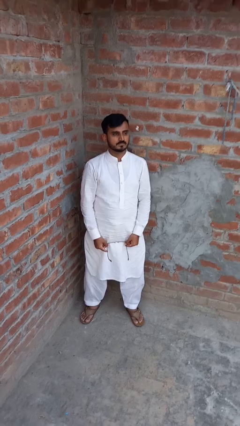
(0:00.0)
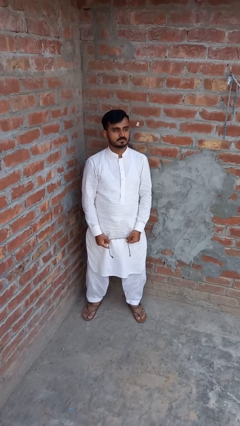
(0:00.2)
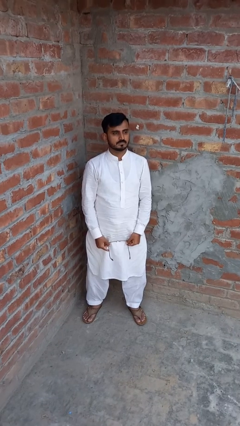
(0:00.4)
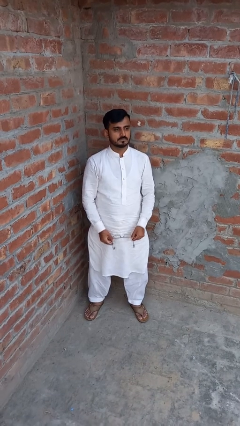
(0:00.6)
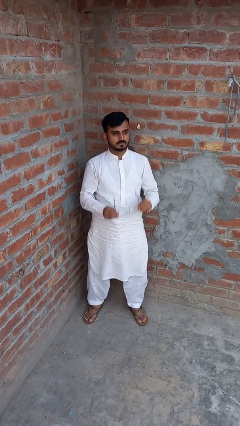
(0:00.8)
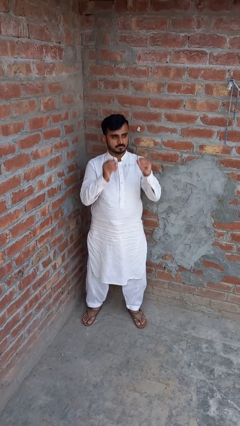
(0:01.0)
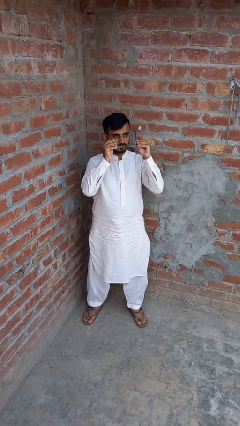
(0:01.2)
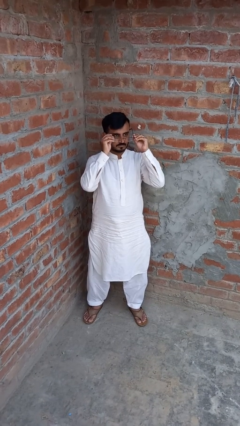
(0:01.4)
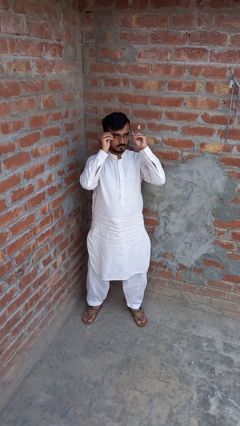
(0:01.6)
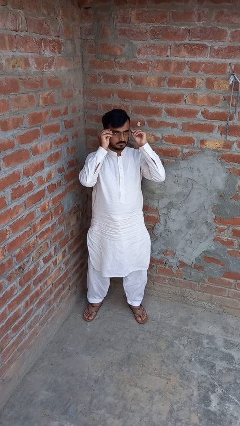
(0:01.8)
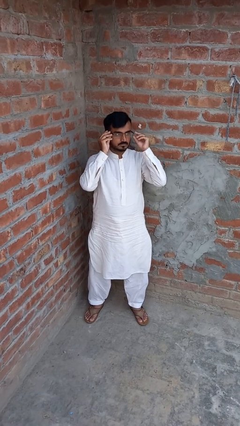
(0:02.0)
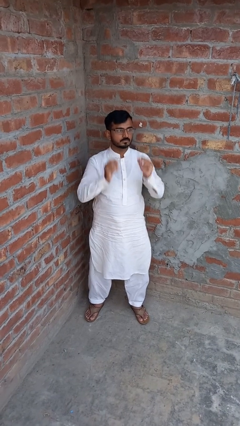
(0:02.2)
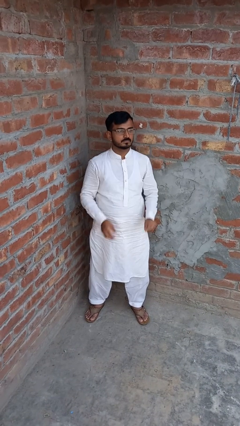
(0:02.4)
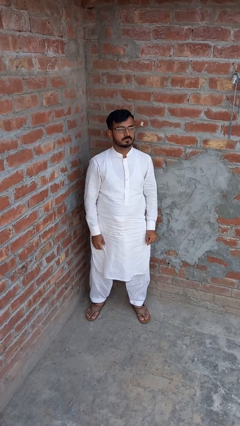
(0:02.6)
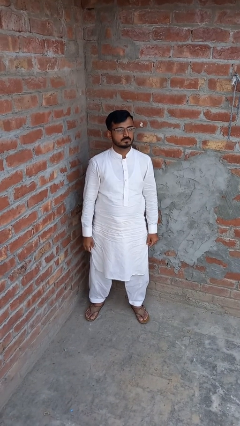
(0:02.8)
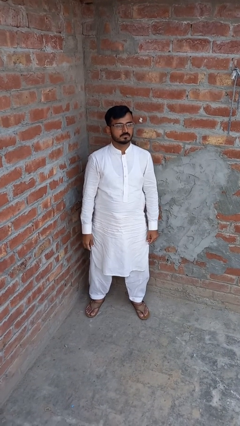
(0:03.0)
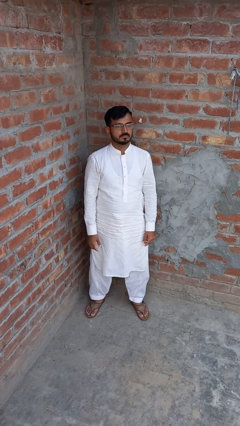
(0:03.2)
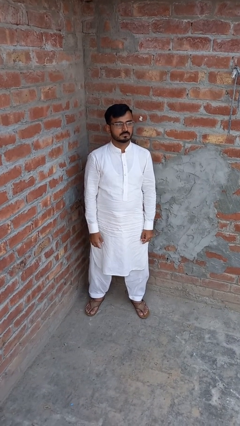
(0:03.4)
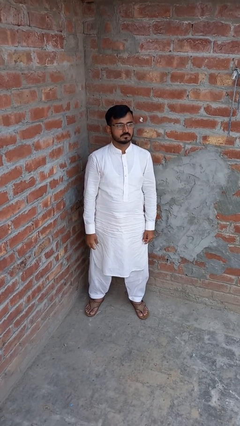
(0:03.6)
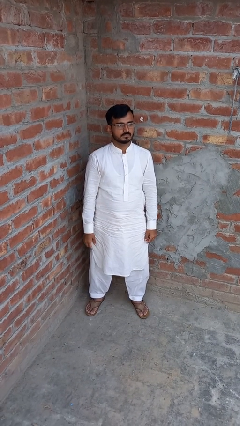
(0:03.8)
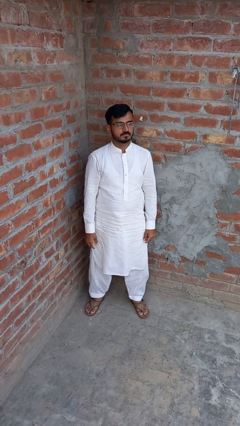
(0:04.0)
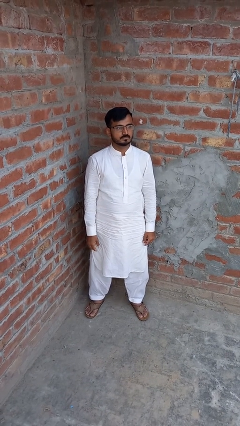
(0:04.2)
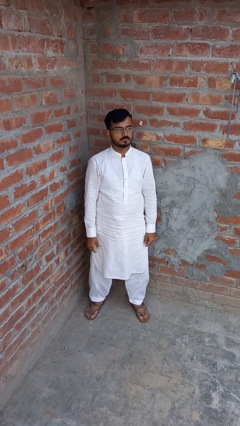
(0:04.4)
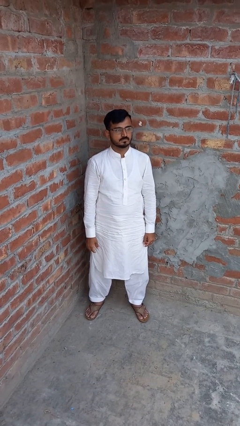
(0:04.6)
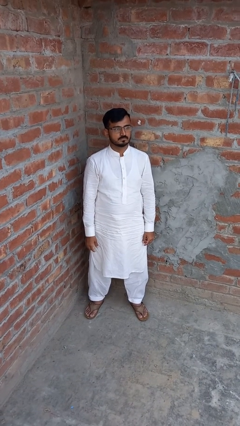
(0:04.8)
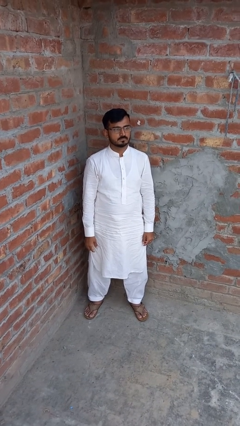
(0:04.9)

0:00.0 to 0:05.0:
person puts on glasses

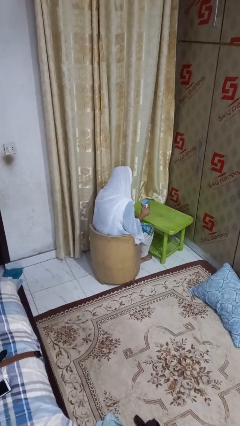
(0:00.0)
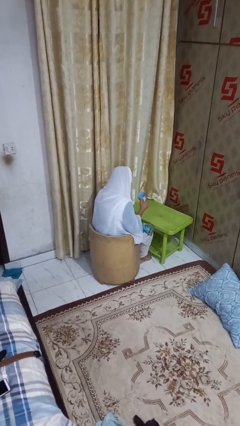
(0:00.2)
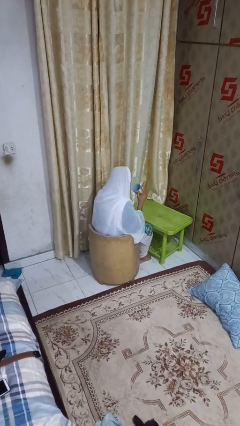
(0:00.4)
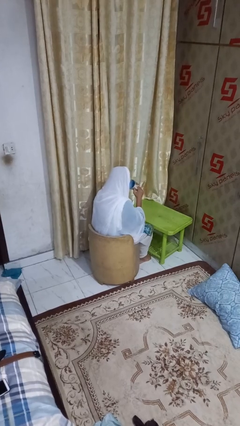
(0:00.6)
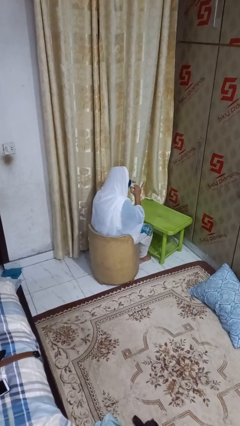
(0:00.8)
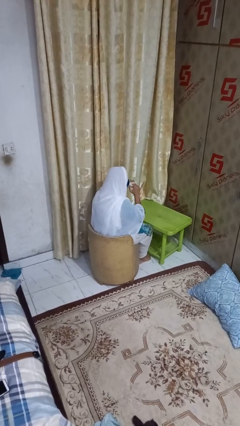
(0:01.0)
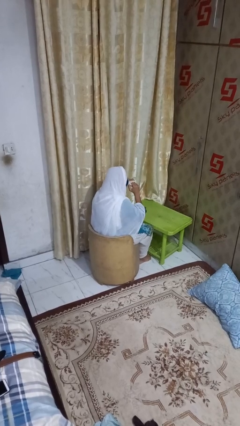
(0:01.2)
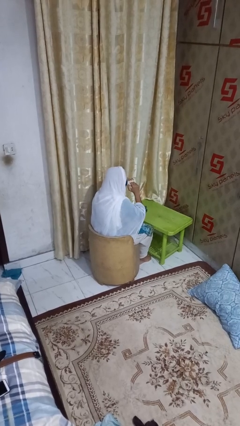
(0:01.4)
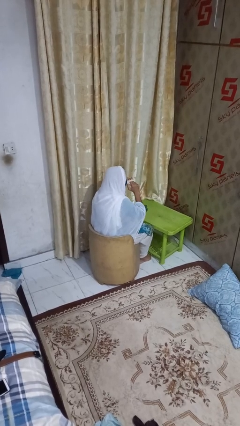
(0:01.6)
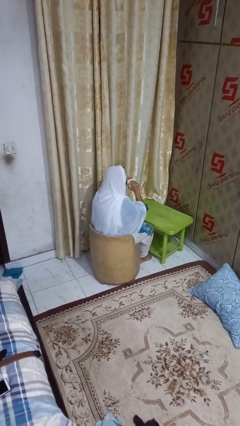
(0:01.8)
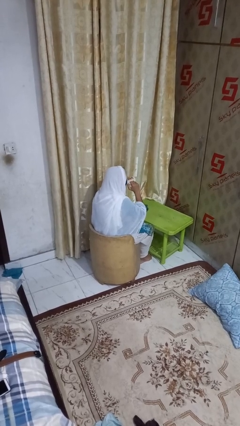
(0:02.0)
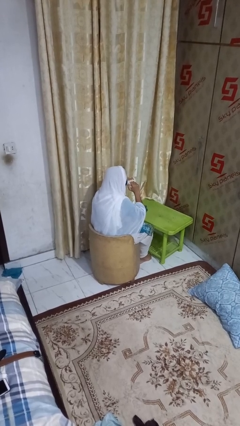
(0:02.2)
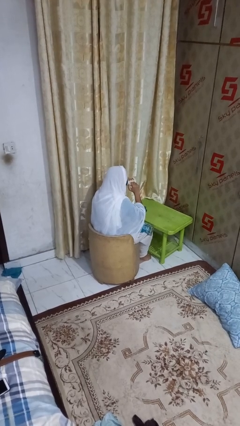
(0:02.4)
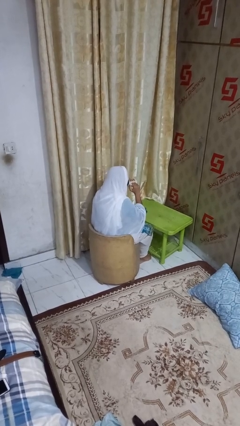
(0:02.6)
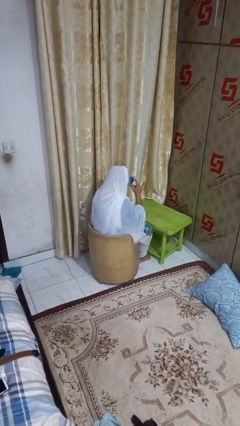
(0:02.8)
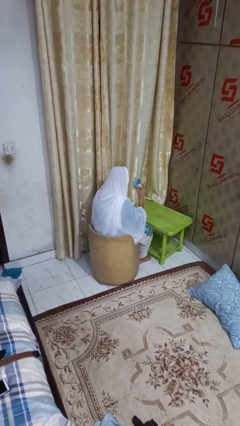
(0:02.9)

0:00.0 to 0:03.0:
person drinks from mug

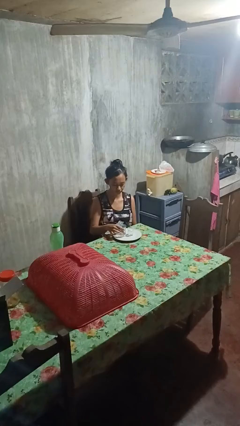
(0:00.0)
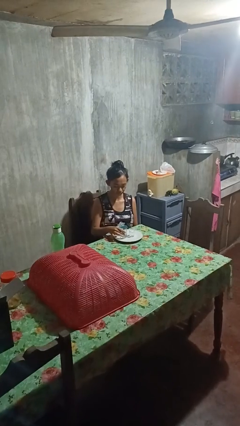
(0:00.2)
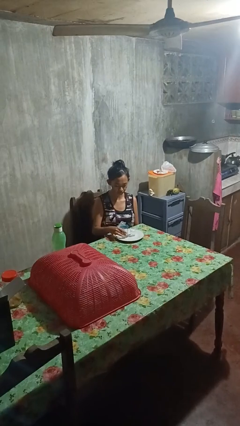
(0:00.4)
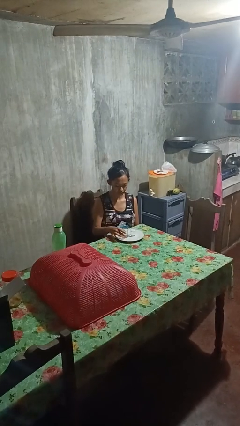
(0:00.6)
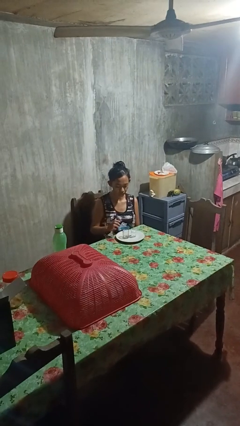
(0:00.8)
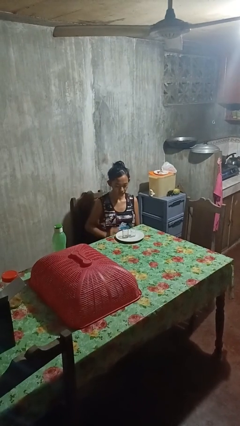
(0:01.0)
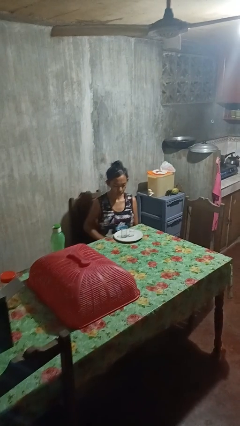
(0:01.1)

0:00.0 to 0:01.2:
person puts down object on table

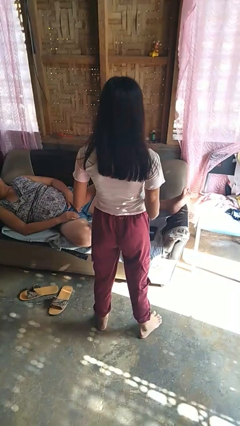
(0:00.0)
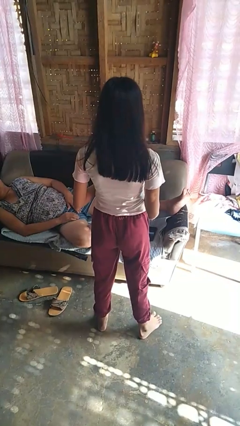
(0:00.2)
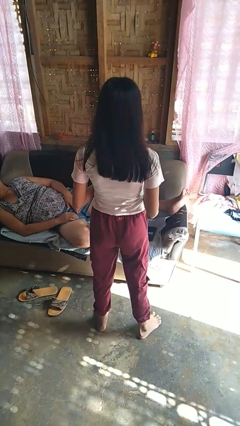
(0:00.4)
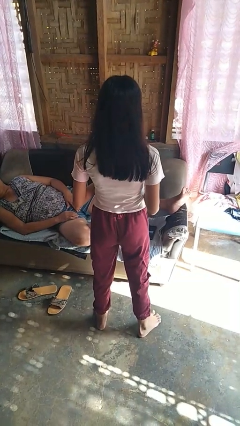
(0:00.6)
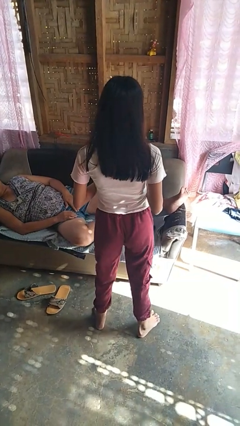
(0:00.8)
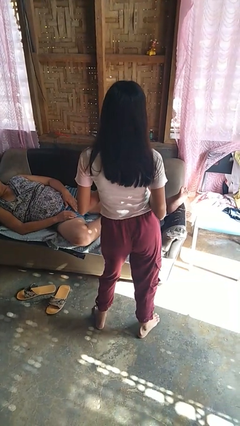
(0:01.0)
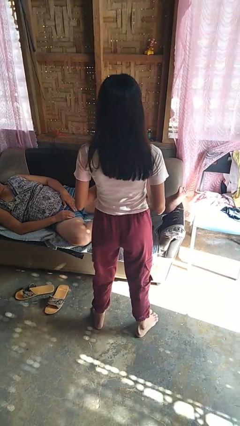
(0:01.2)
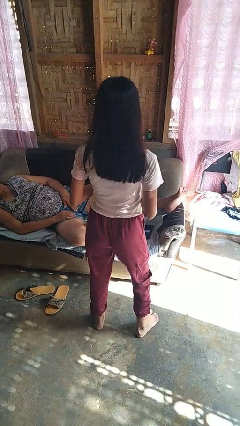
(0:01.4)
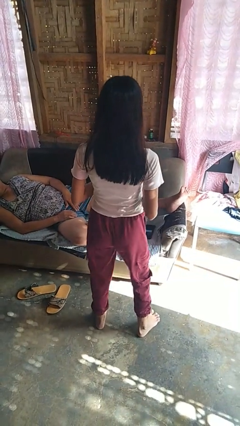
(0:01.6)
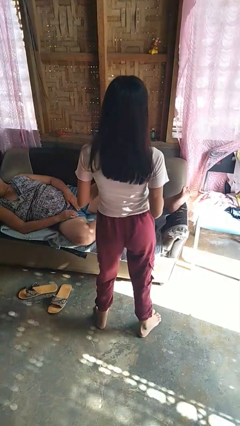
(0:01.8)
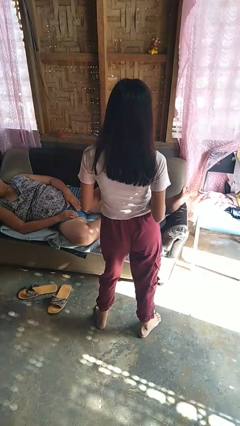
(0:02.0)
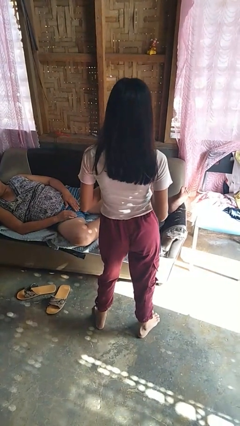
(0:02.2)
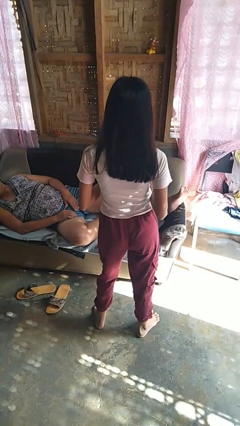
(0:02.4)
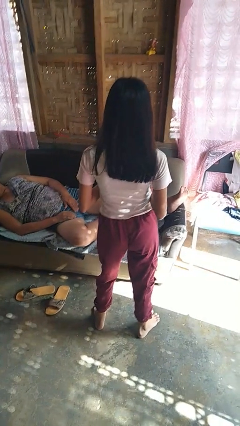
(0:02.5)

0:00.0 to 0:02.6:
person wiggles hips

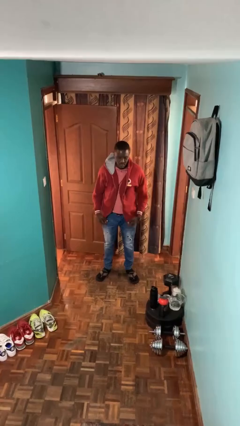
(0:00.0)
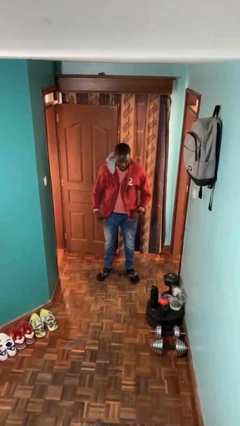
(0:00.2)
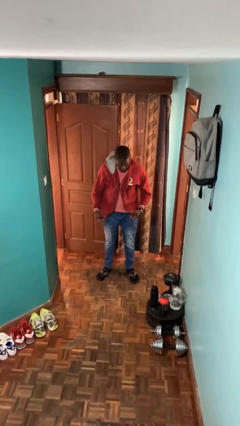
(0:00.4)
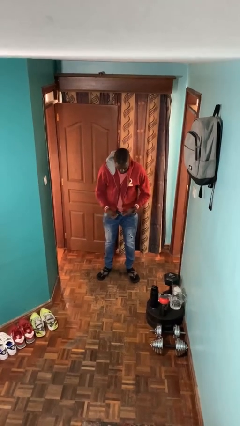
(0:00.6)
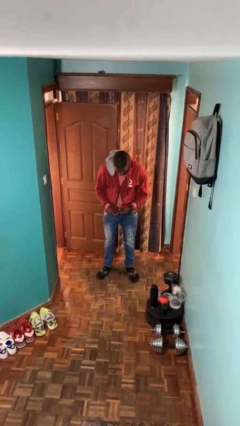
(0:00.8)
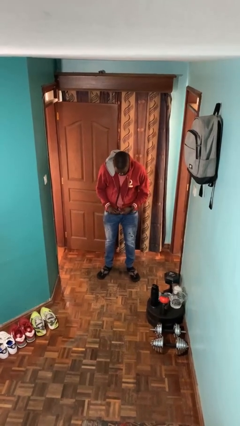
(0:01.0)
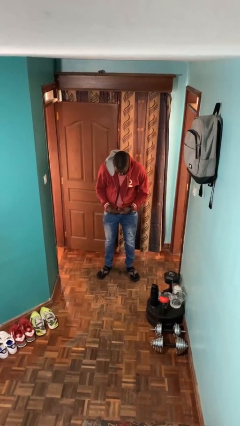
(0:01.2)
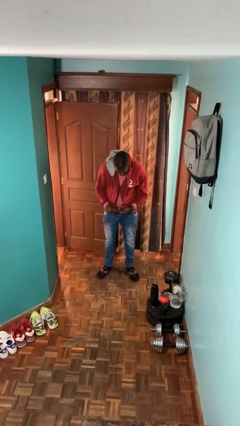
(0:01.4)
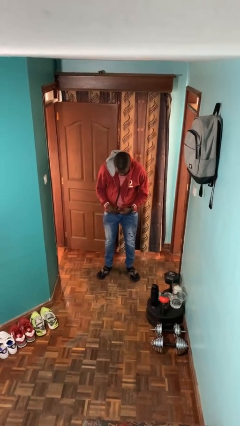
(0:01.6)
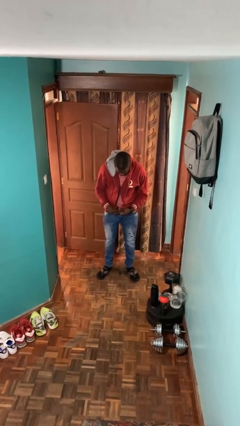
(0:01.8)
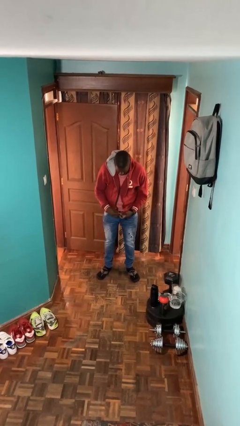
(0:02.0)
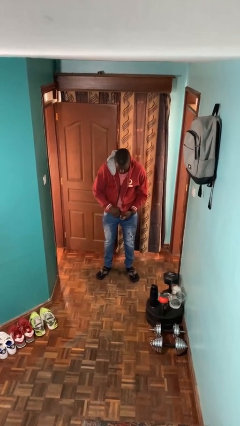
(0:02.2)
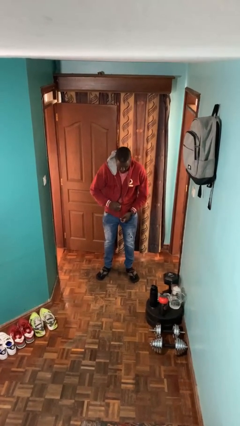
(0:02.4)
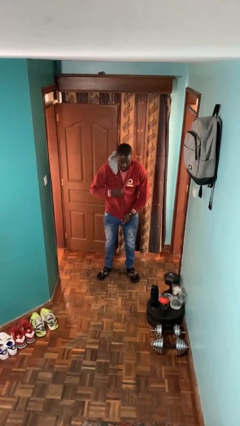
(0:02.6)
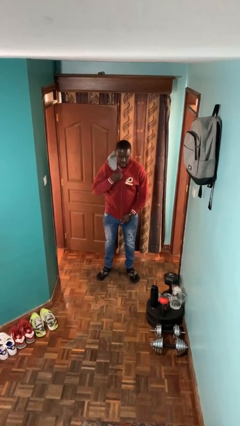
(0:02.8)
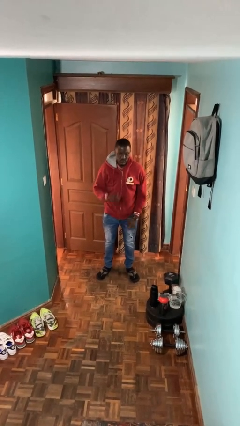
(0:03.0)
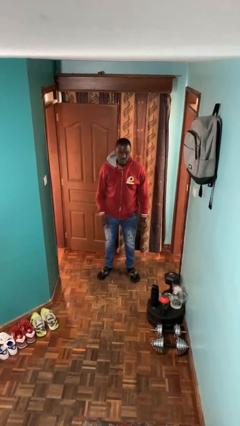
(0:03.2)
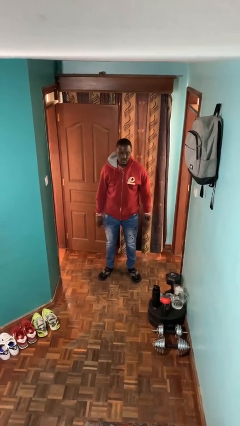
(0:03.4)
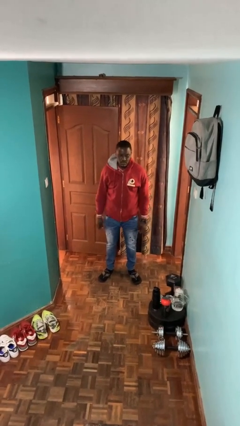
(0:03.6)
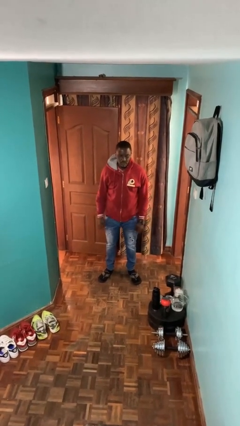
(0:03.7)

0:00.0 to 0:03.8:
person zips up jacket

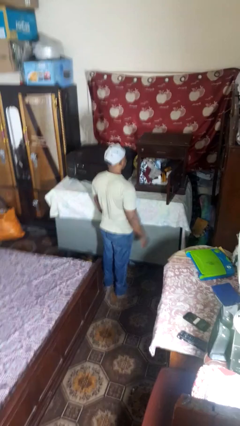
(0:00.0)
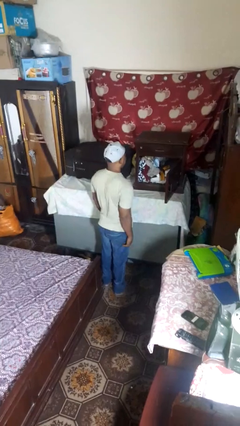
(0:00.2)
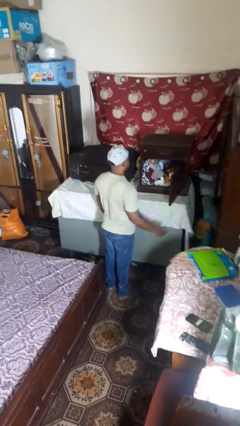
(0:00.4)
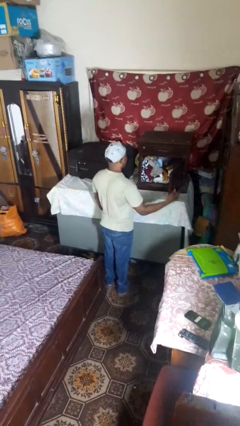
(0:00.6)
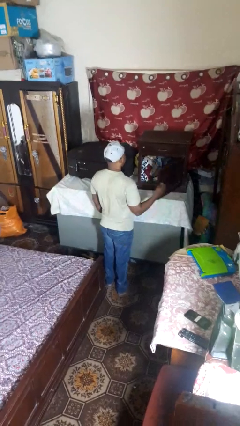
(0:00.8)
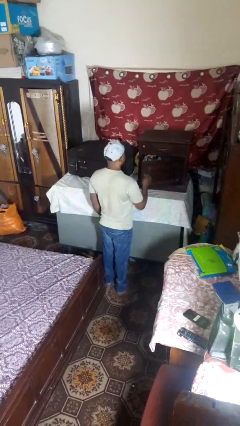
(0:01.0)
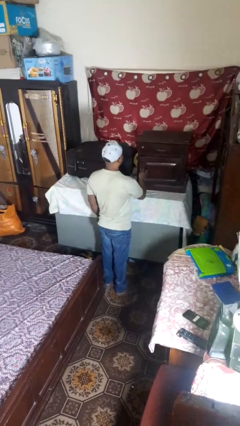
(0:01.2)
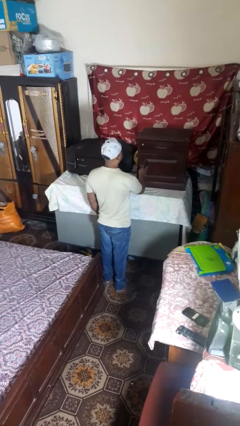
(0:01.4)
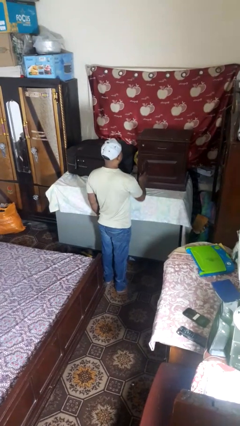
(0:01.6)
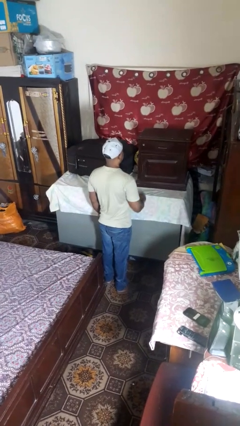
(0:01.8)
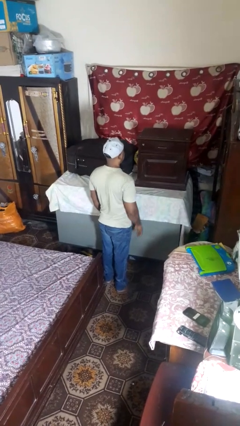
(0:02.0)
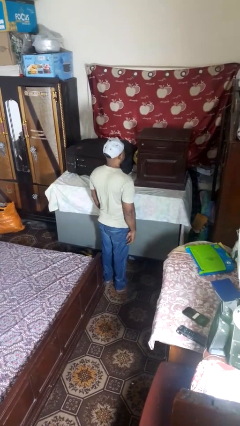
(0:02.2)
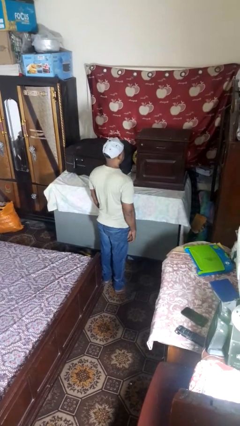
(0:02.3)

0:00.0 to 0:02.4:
person closes closet door
